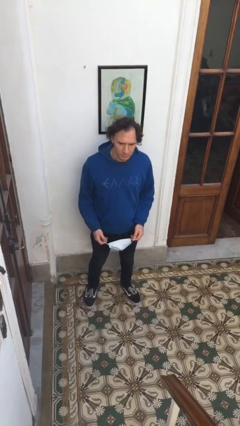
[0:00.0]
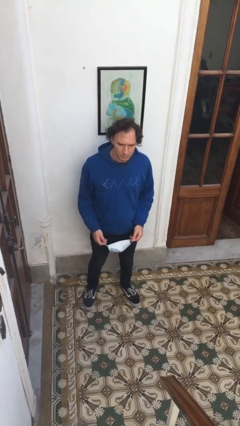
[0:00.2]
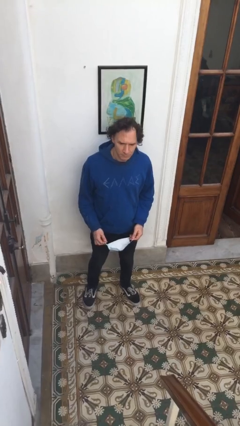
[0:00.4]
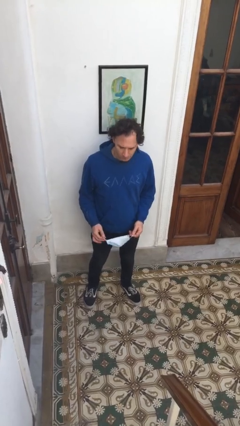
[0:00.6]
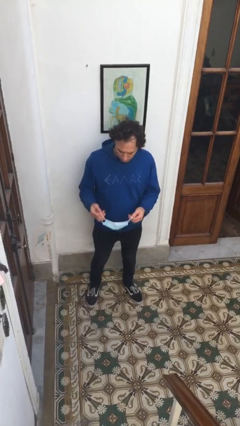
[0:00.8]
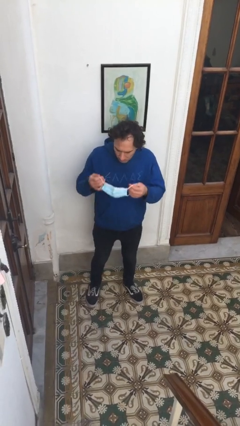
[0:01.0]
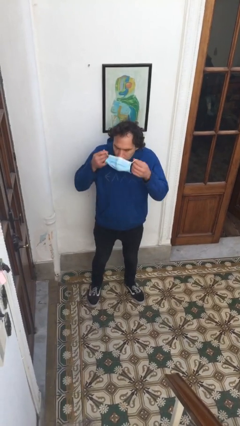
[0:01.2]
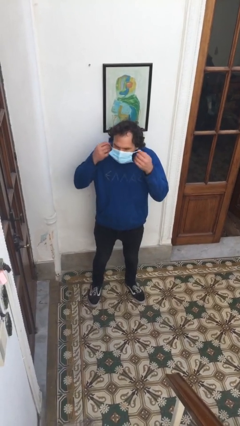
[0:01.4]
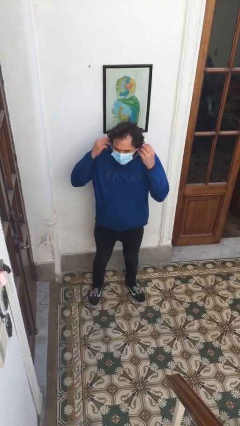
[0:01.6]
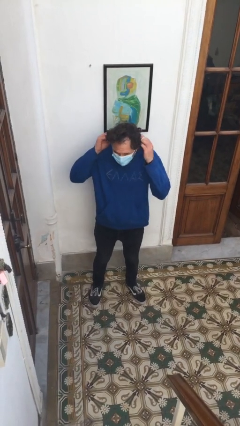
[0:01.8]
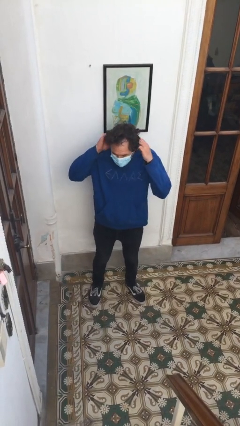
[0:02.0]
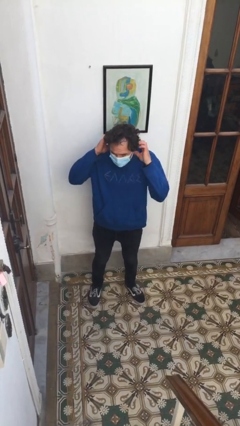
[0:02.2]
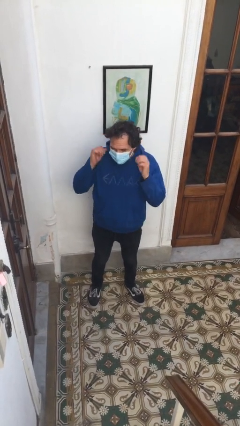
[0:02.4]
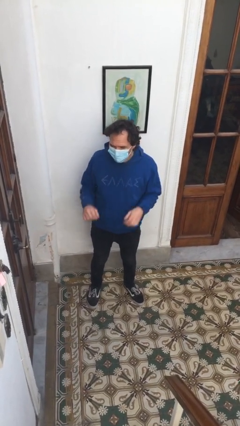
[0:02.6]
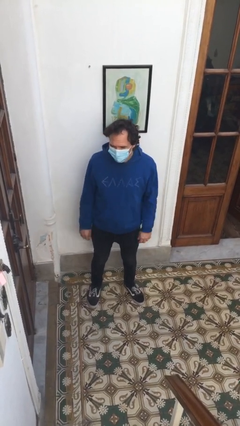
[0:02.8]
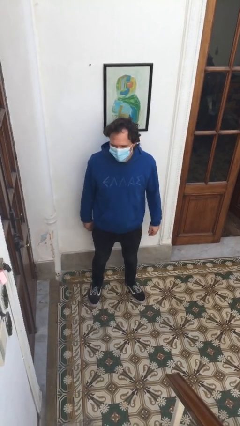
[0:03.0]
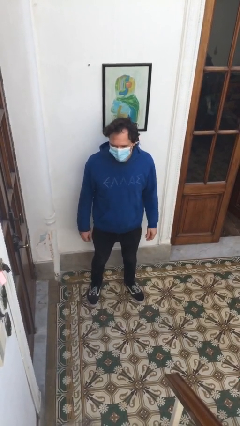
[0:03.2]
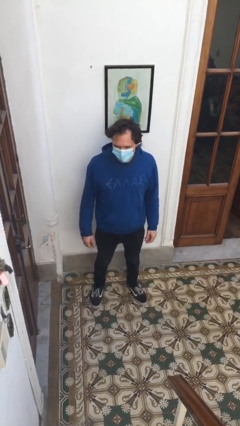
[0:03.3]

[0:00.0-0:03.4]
person puts on facemask

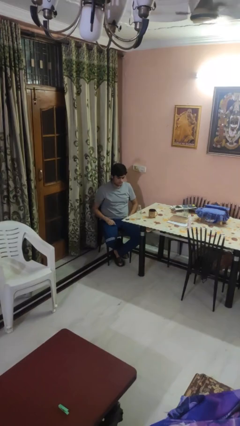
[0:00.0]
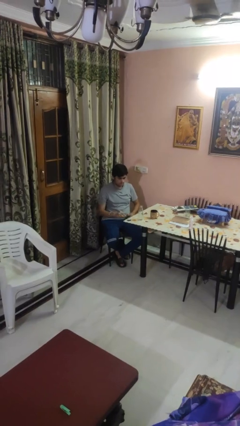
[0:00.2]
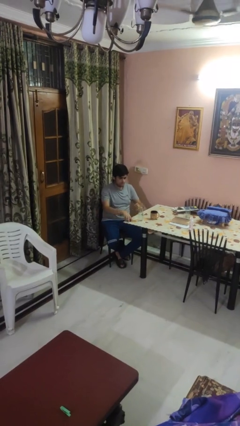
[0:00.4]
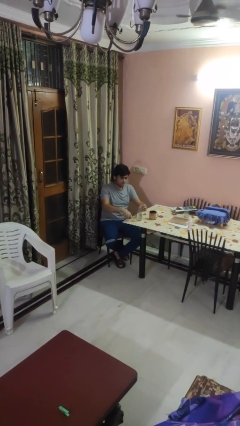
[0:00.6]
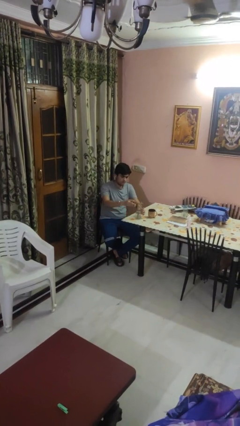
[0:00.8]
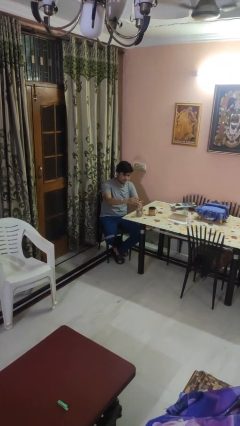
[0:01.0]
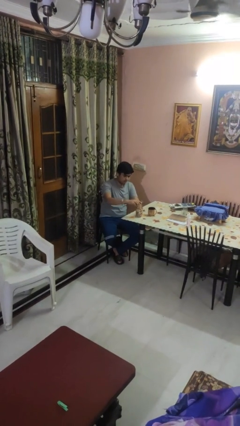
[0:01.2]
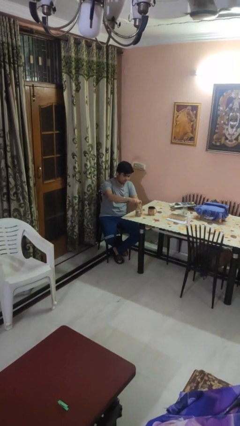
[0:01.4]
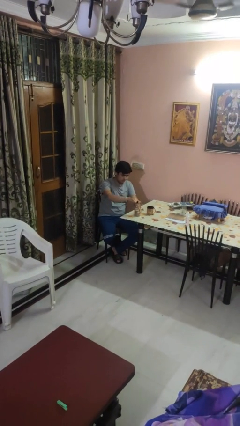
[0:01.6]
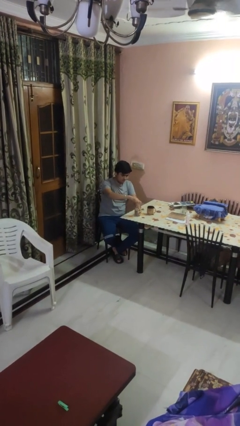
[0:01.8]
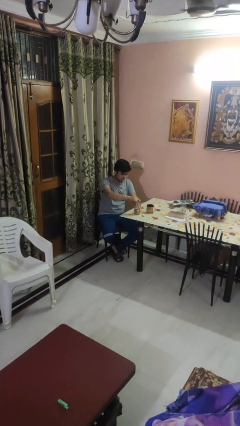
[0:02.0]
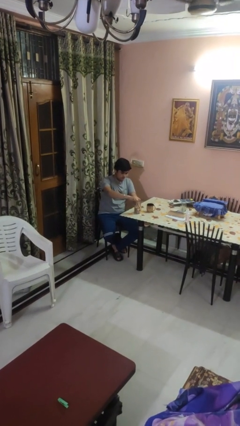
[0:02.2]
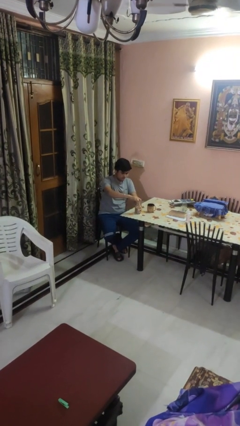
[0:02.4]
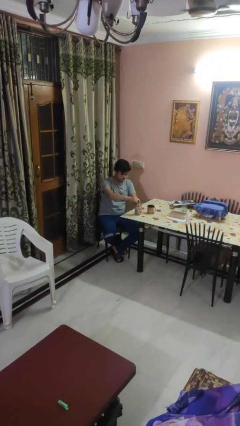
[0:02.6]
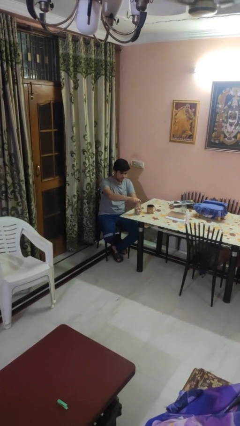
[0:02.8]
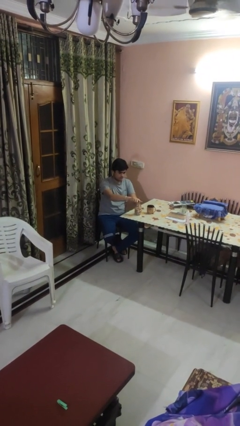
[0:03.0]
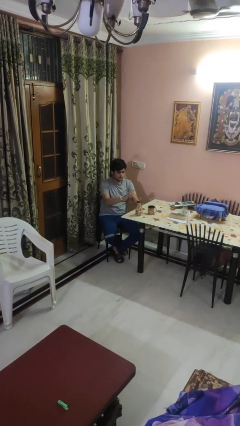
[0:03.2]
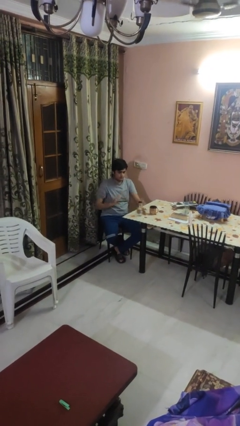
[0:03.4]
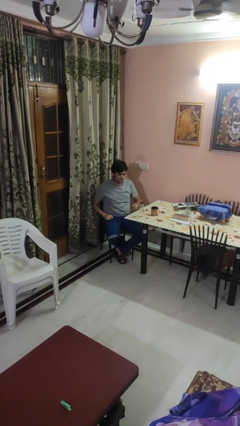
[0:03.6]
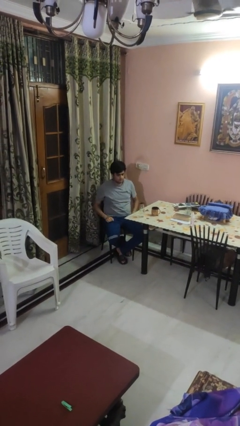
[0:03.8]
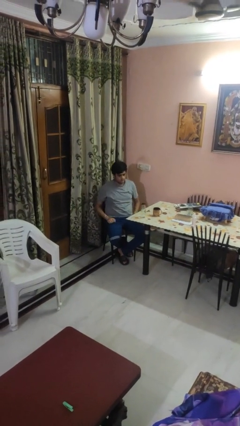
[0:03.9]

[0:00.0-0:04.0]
person screws lid to bottle

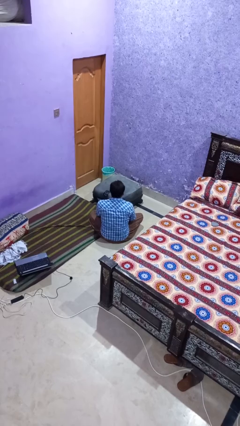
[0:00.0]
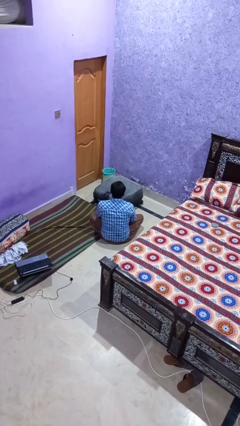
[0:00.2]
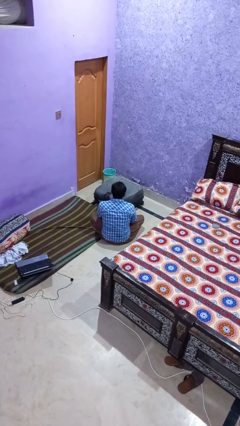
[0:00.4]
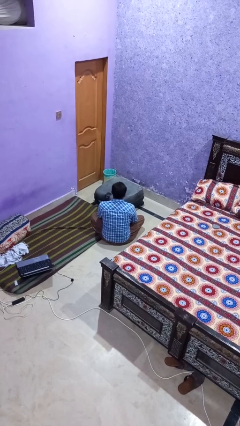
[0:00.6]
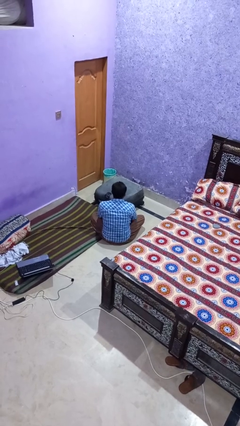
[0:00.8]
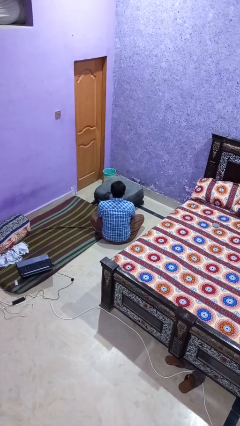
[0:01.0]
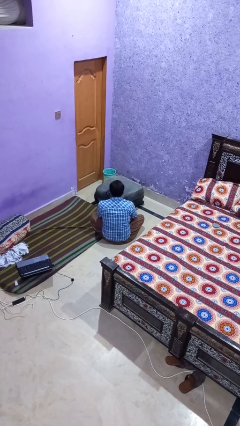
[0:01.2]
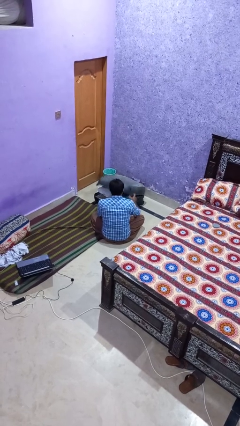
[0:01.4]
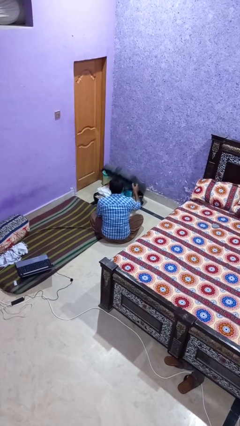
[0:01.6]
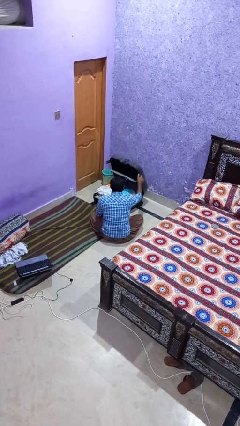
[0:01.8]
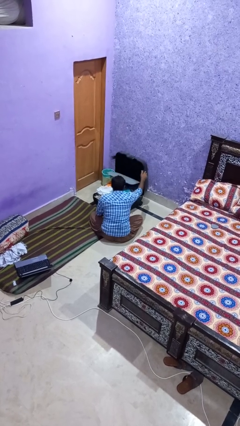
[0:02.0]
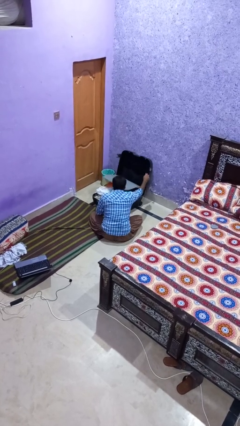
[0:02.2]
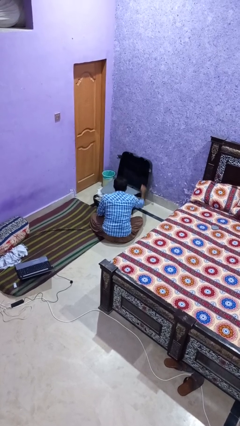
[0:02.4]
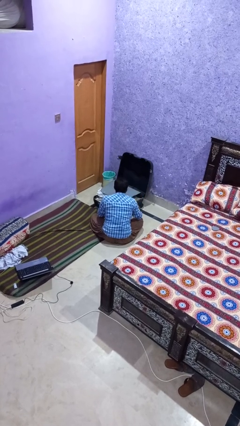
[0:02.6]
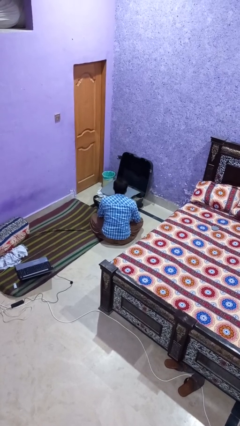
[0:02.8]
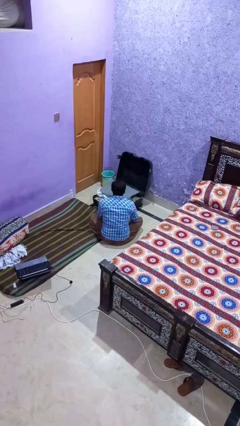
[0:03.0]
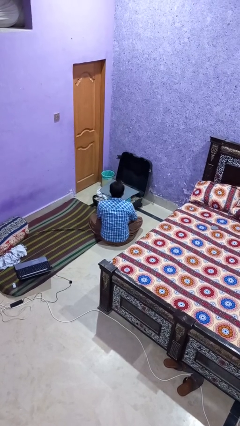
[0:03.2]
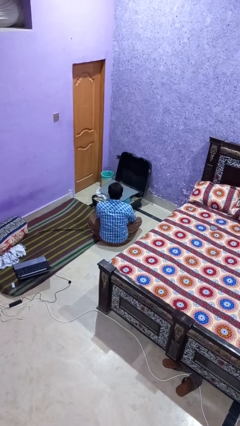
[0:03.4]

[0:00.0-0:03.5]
person opens suitcase

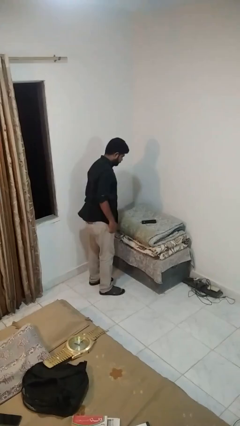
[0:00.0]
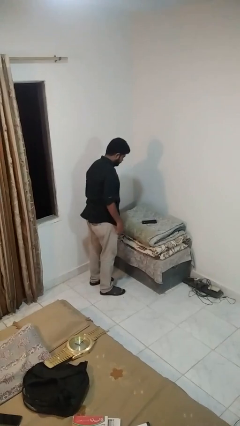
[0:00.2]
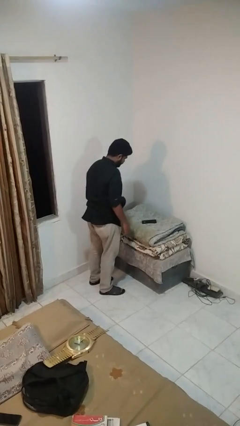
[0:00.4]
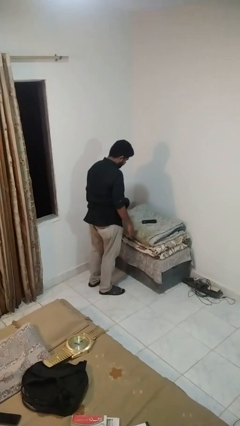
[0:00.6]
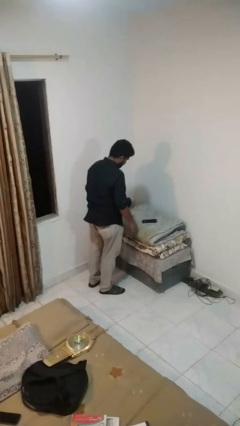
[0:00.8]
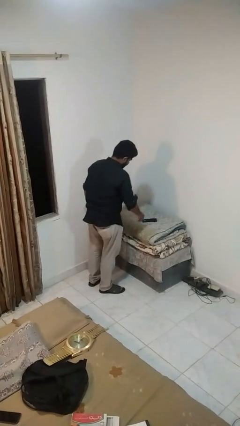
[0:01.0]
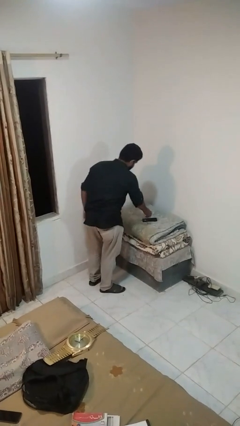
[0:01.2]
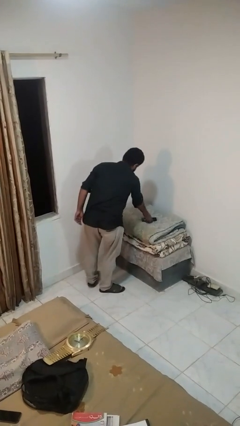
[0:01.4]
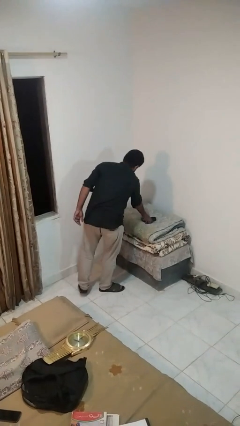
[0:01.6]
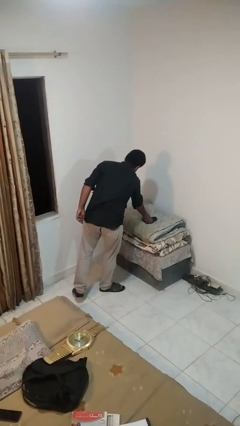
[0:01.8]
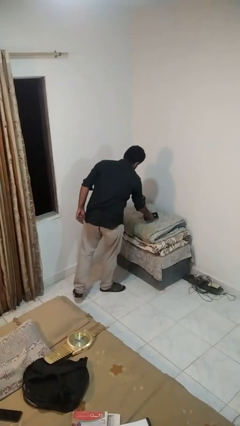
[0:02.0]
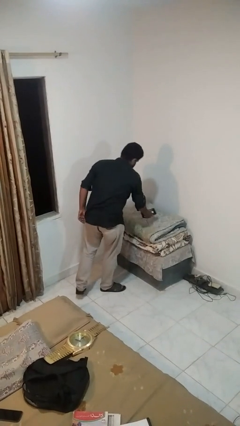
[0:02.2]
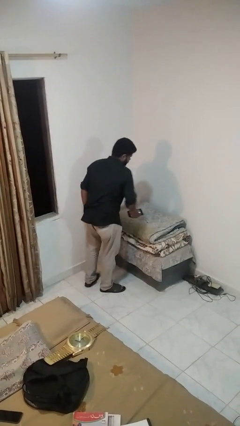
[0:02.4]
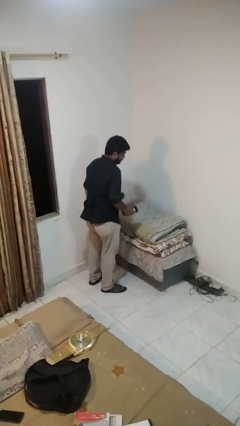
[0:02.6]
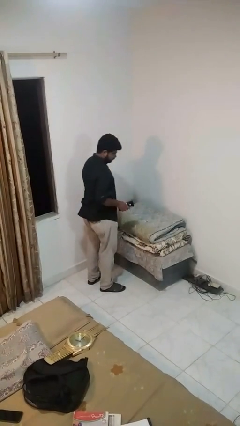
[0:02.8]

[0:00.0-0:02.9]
person picks up object from couch

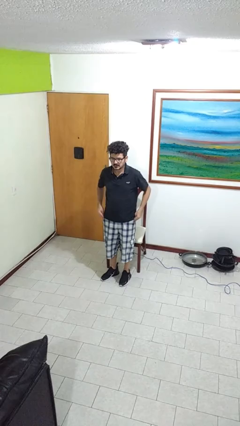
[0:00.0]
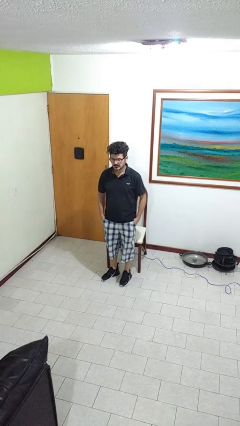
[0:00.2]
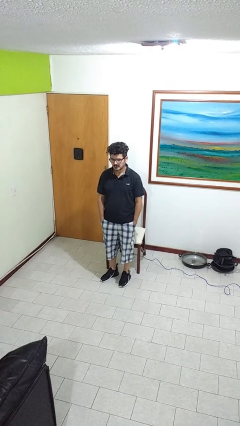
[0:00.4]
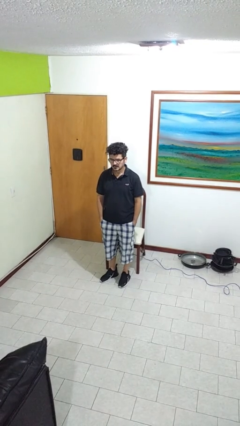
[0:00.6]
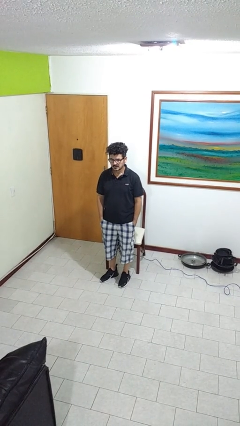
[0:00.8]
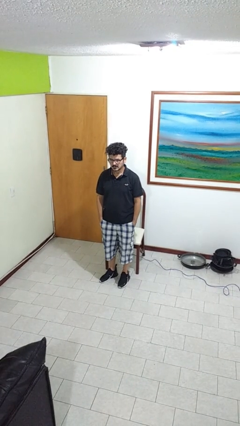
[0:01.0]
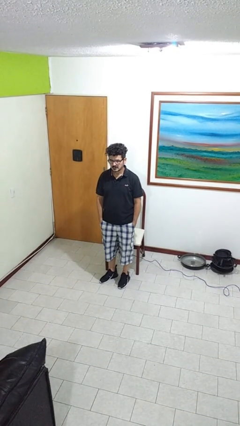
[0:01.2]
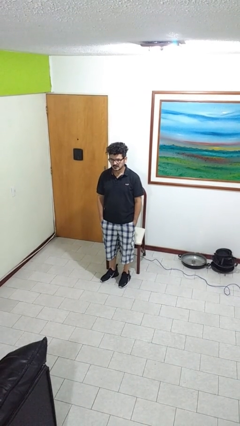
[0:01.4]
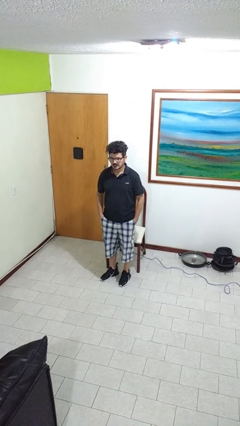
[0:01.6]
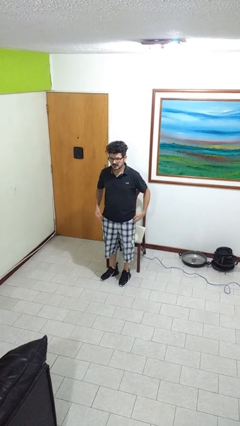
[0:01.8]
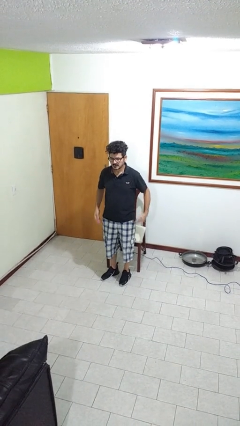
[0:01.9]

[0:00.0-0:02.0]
person puts hands in back pockets

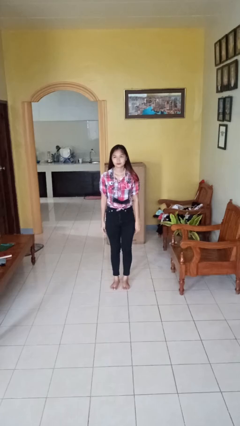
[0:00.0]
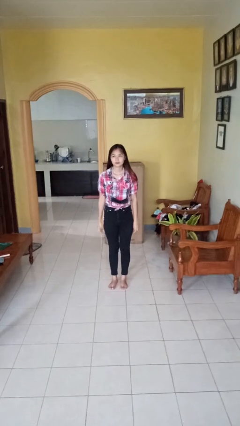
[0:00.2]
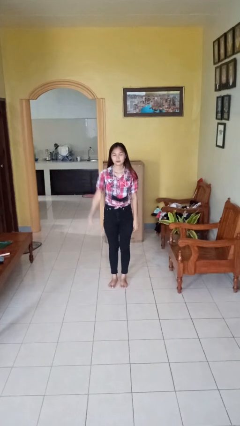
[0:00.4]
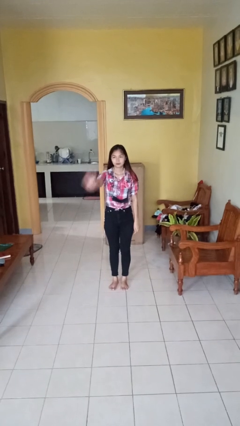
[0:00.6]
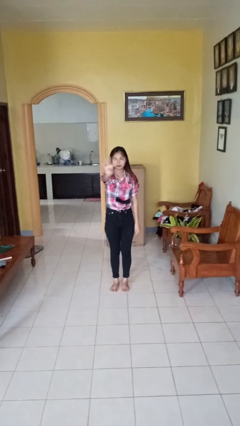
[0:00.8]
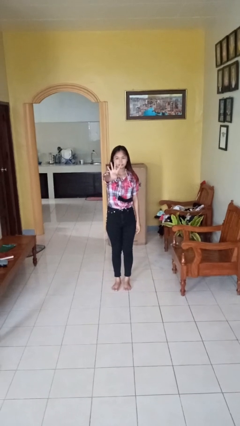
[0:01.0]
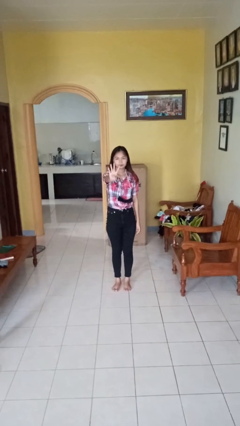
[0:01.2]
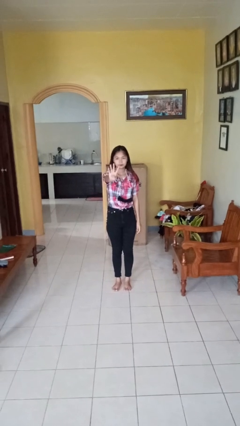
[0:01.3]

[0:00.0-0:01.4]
person gestures number four

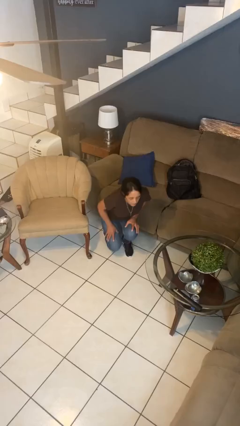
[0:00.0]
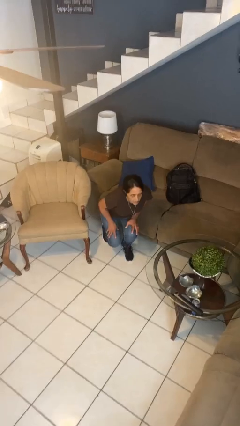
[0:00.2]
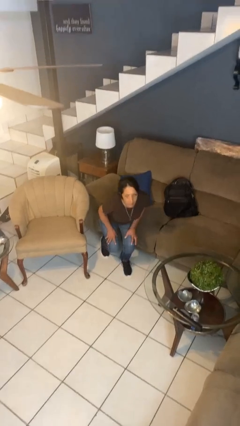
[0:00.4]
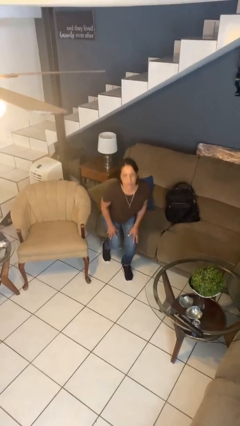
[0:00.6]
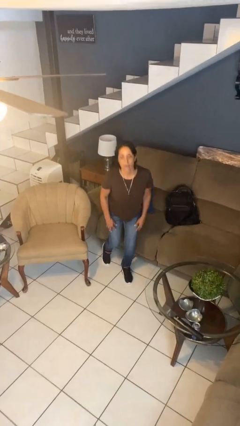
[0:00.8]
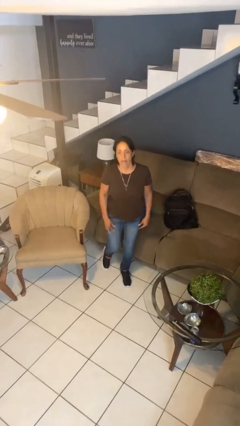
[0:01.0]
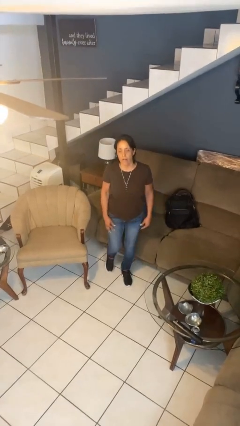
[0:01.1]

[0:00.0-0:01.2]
person stands up from floor
